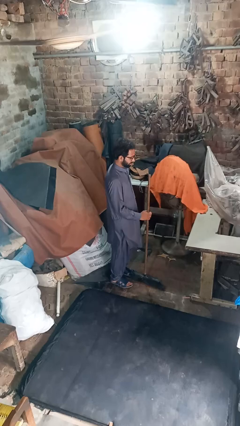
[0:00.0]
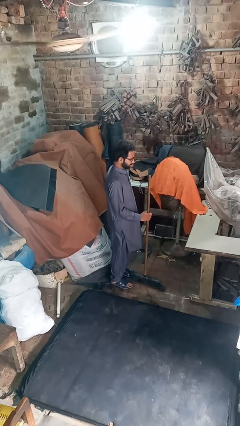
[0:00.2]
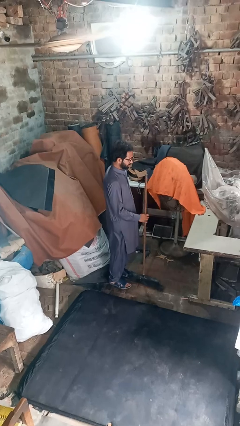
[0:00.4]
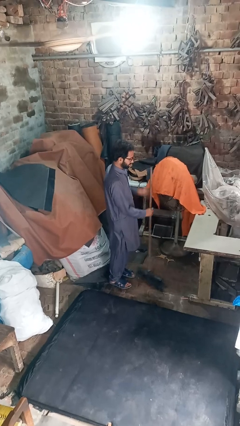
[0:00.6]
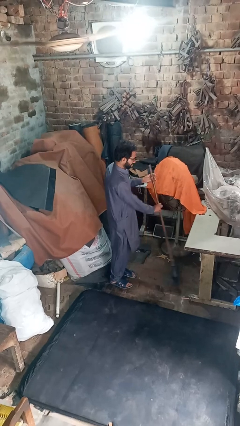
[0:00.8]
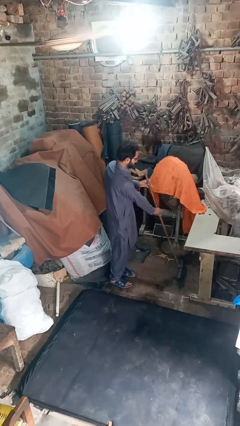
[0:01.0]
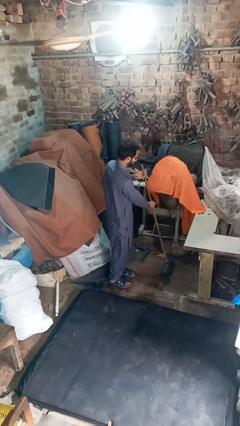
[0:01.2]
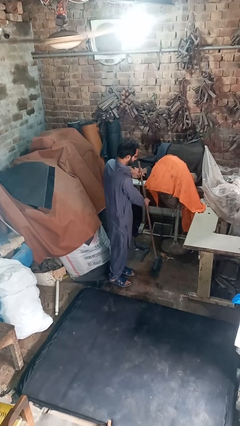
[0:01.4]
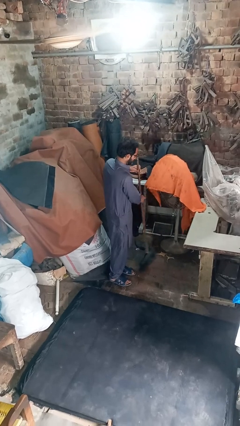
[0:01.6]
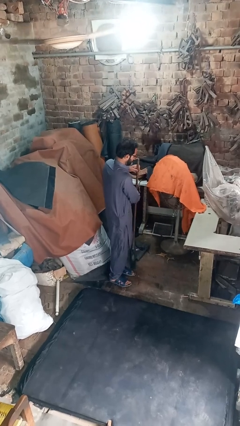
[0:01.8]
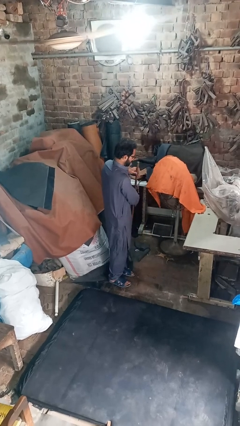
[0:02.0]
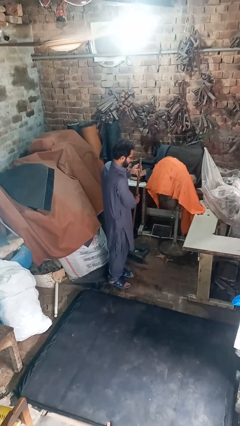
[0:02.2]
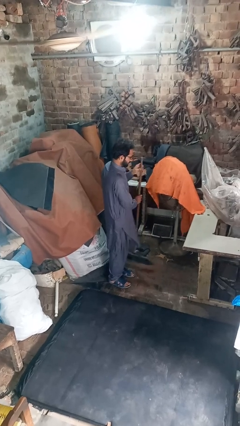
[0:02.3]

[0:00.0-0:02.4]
person sweeps floor

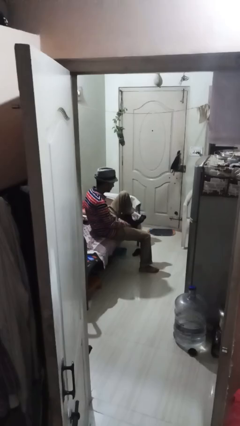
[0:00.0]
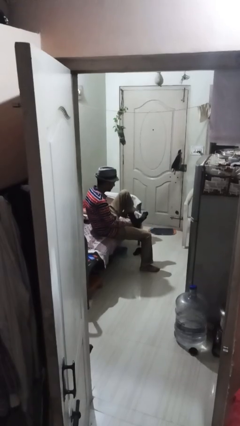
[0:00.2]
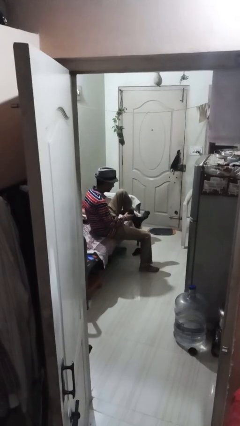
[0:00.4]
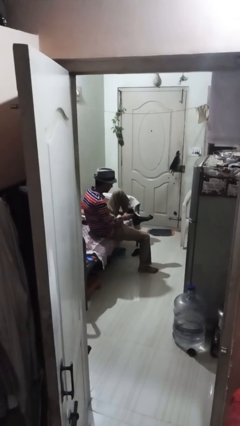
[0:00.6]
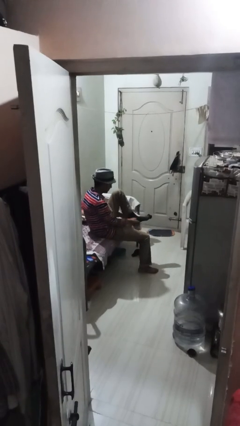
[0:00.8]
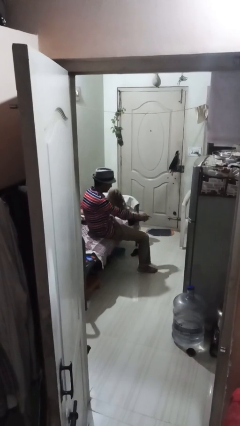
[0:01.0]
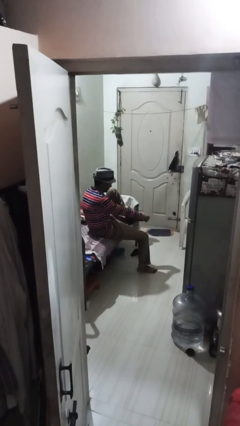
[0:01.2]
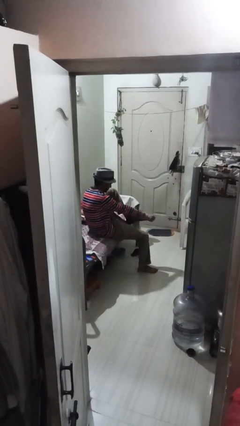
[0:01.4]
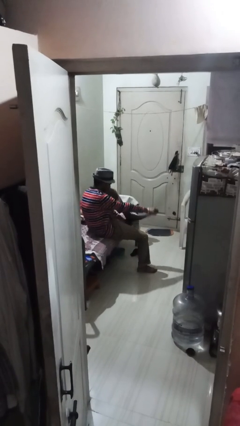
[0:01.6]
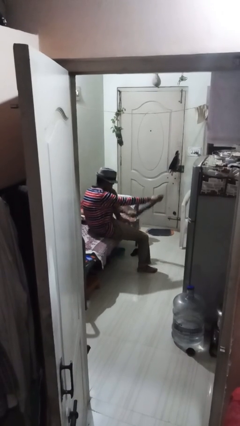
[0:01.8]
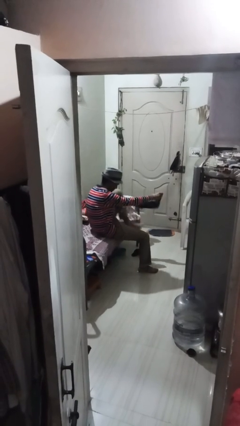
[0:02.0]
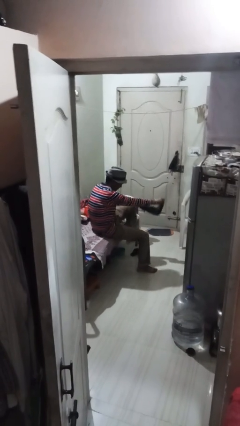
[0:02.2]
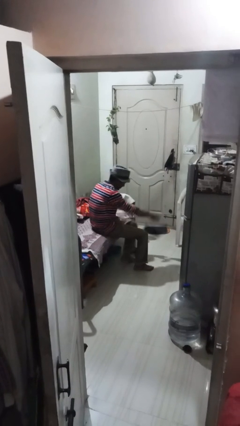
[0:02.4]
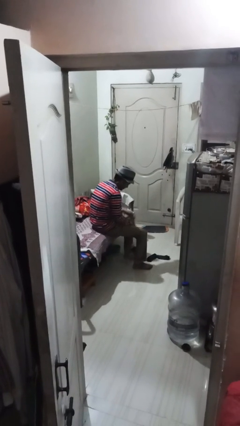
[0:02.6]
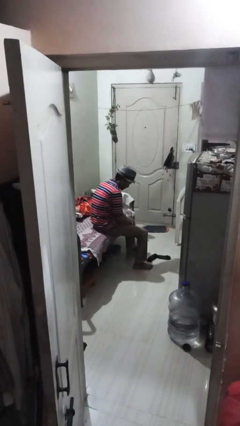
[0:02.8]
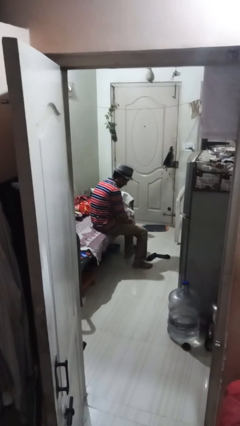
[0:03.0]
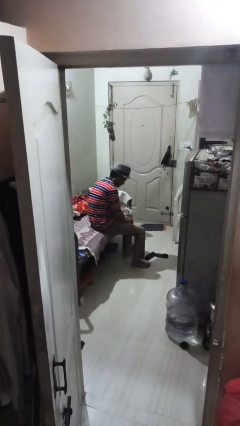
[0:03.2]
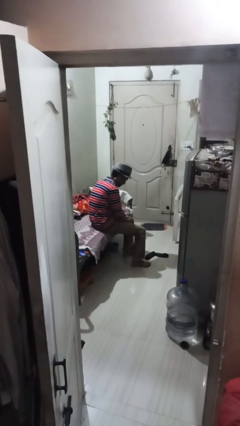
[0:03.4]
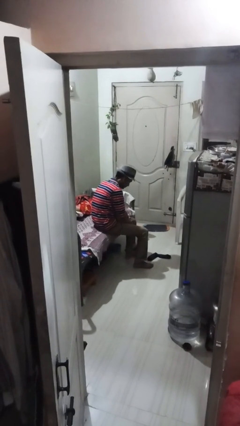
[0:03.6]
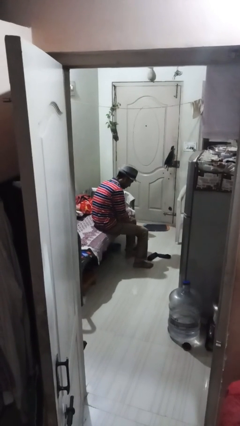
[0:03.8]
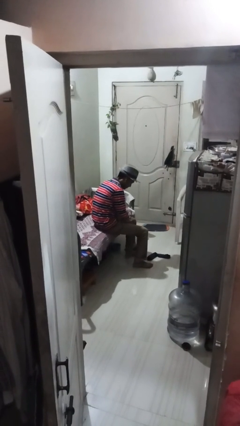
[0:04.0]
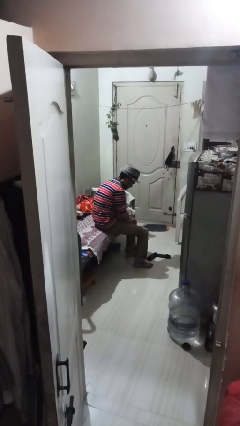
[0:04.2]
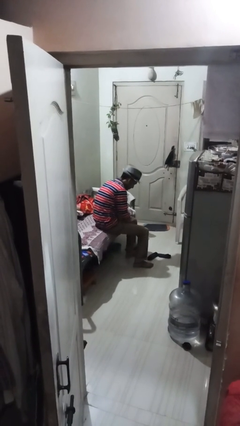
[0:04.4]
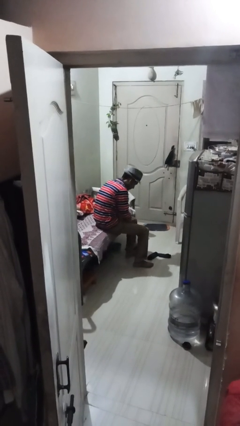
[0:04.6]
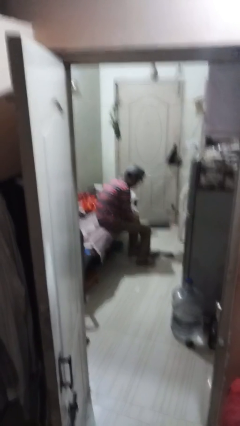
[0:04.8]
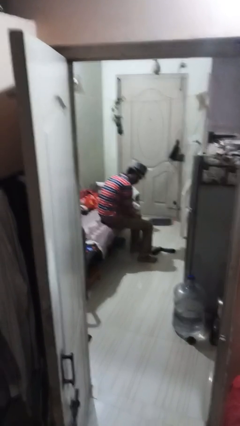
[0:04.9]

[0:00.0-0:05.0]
person takes off socks

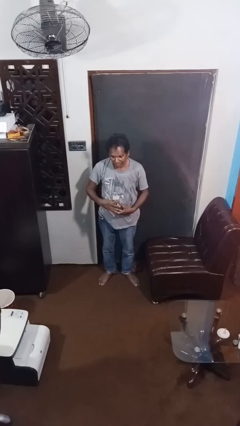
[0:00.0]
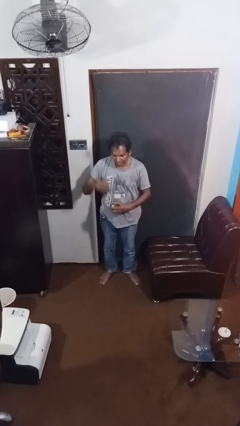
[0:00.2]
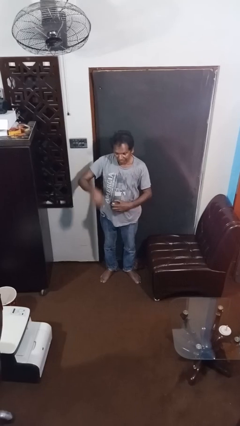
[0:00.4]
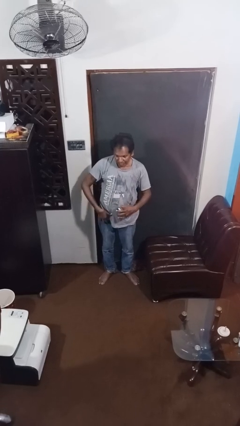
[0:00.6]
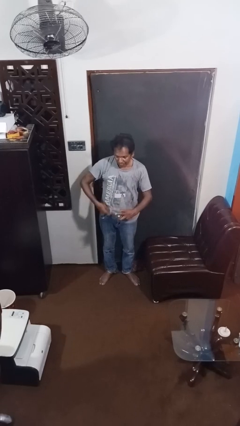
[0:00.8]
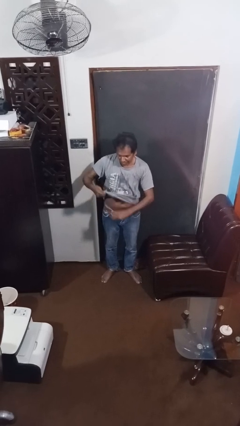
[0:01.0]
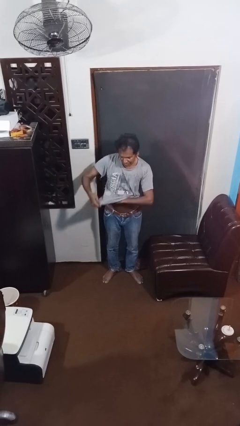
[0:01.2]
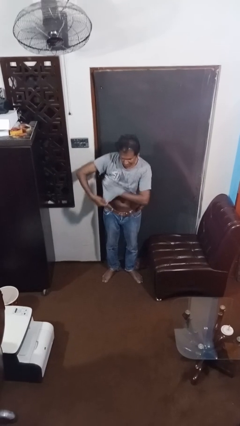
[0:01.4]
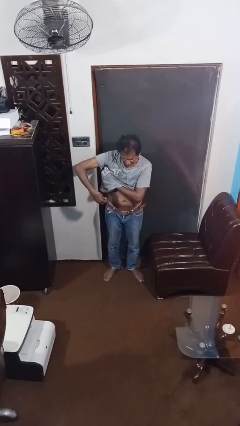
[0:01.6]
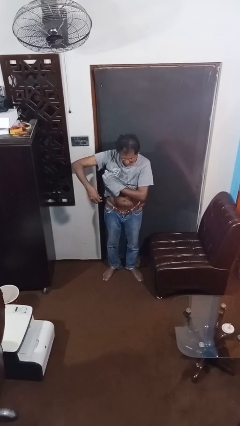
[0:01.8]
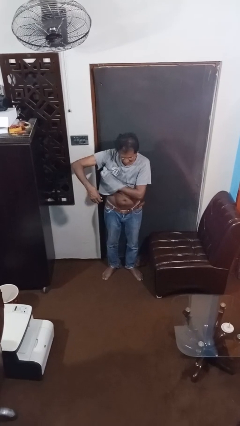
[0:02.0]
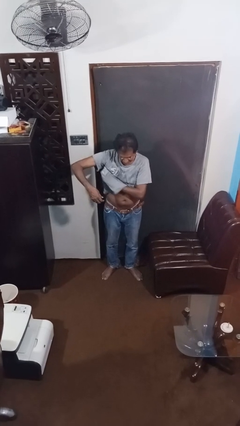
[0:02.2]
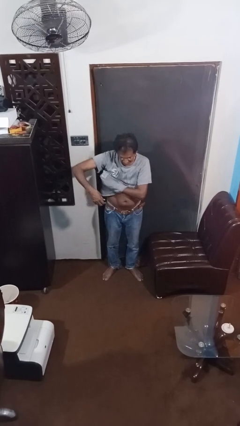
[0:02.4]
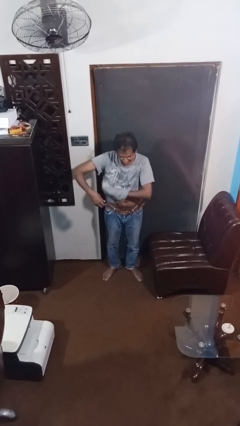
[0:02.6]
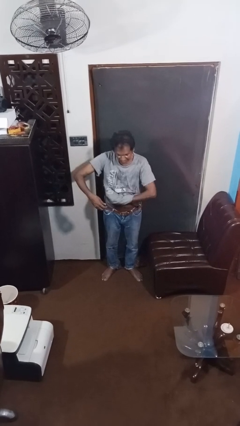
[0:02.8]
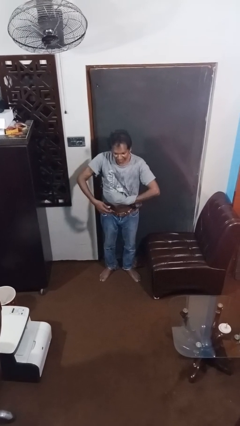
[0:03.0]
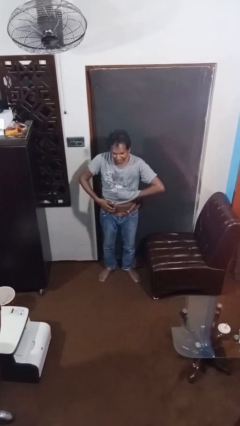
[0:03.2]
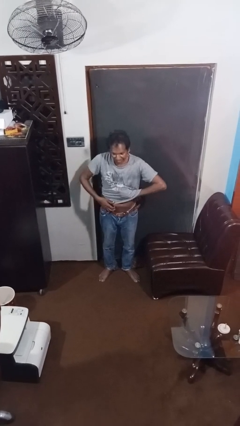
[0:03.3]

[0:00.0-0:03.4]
person applies deodorant

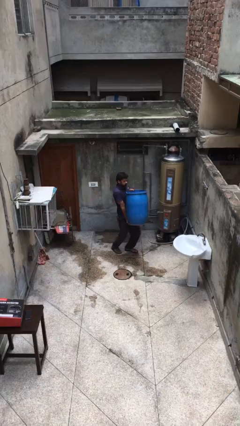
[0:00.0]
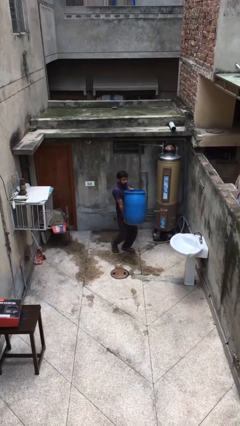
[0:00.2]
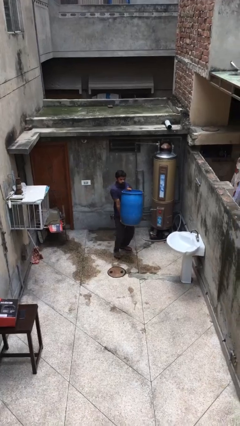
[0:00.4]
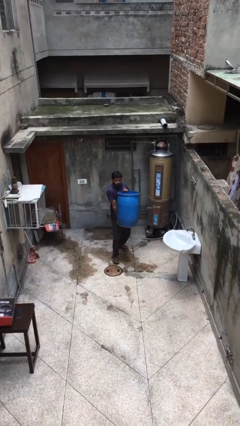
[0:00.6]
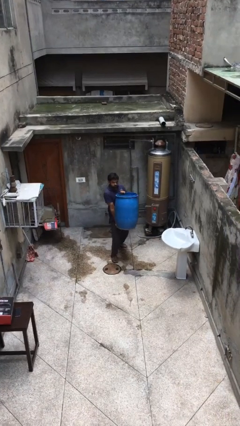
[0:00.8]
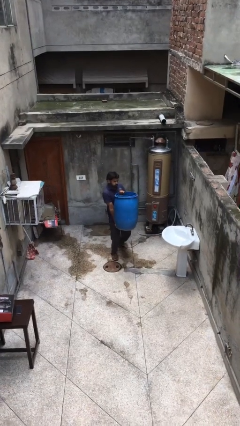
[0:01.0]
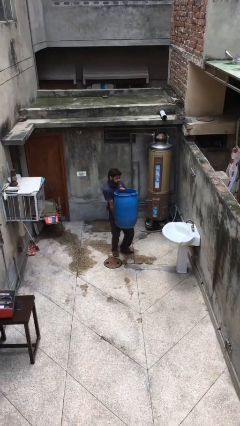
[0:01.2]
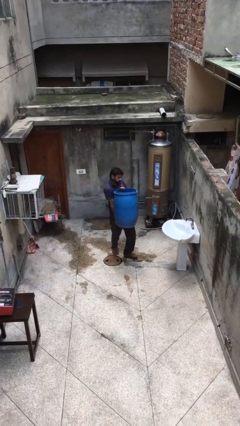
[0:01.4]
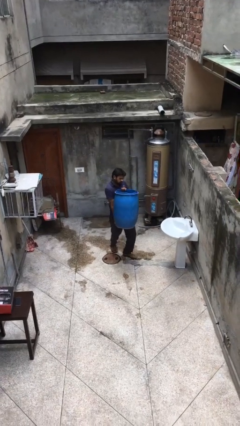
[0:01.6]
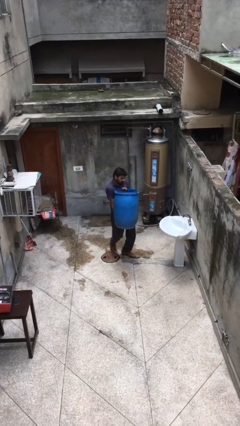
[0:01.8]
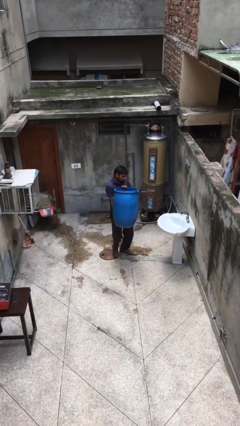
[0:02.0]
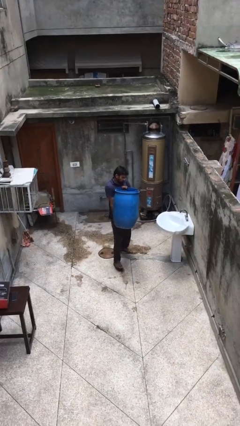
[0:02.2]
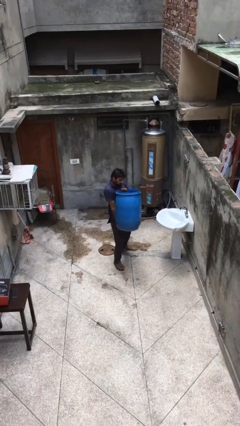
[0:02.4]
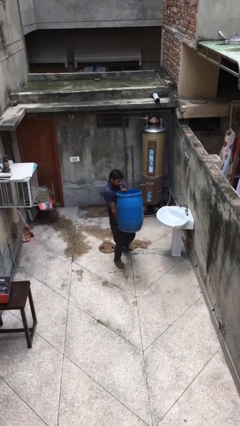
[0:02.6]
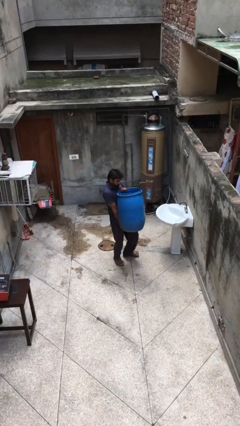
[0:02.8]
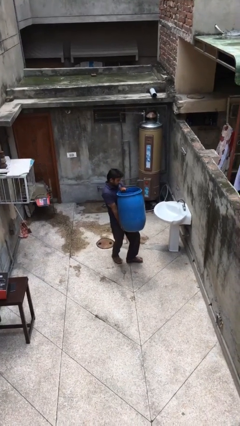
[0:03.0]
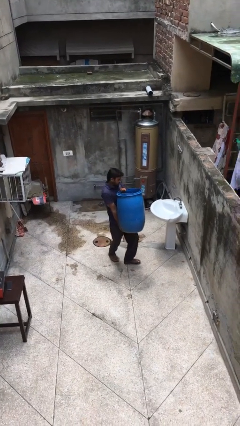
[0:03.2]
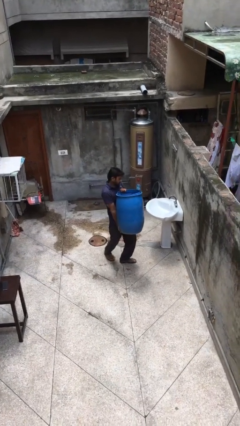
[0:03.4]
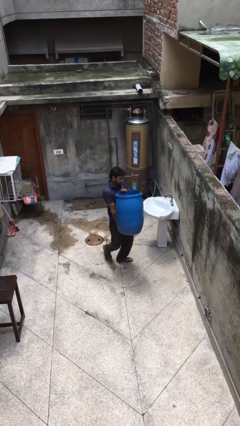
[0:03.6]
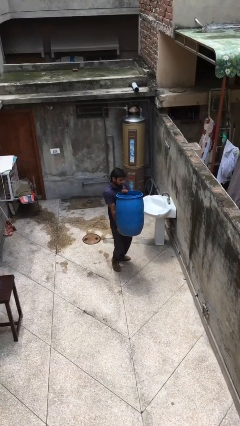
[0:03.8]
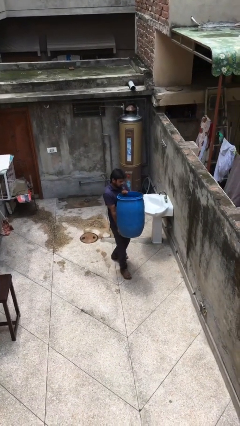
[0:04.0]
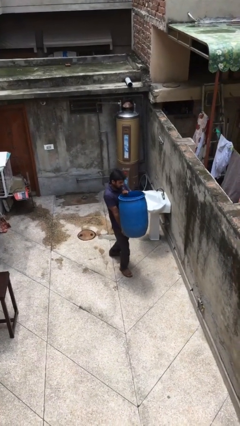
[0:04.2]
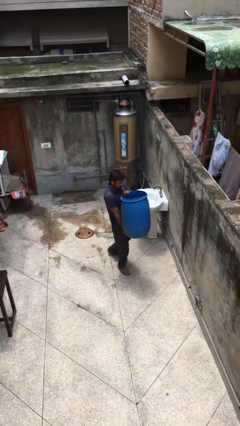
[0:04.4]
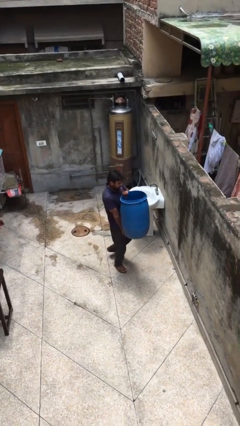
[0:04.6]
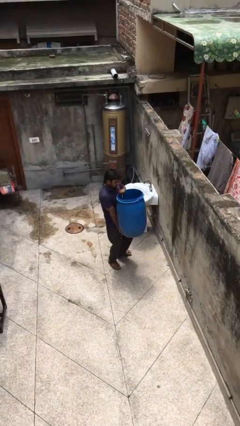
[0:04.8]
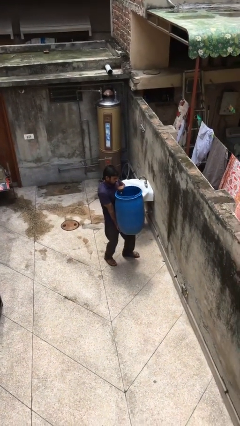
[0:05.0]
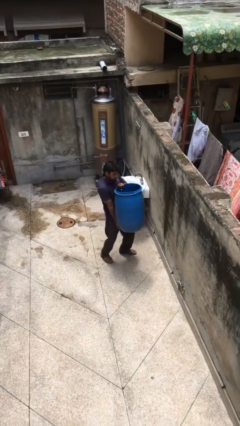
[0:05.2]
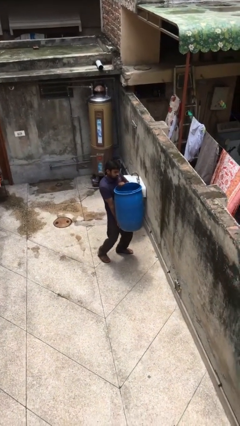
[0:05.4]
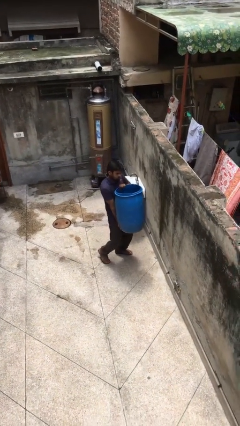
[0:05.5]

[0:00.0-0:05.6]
person carries heavy object

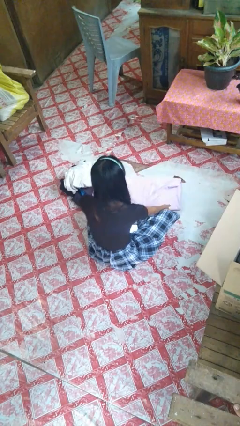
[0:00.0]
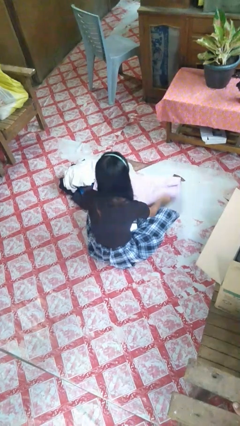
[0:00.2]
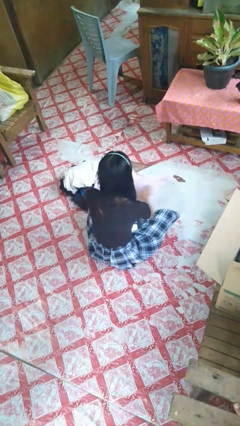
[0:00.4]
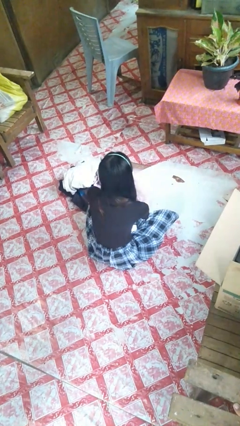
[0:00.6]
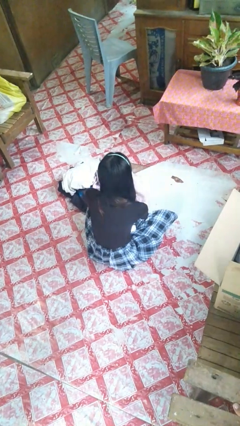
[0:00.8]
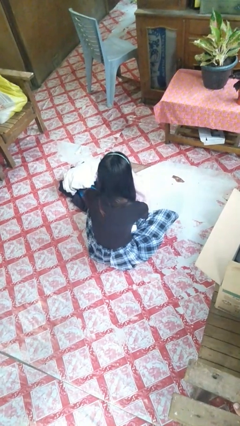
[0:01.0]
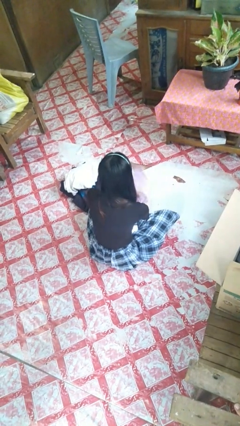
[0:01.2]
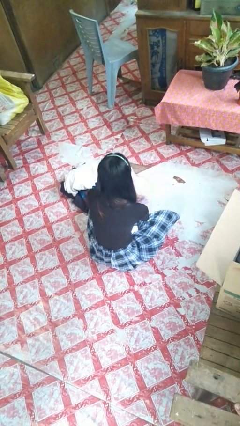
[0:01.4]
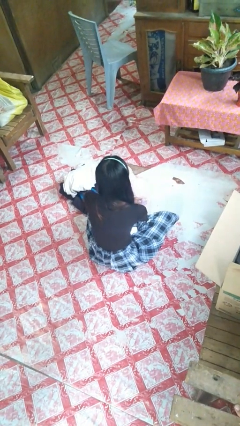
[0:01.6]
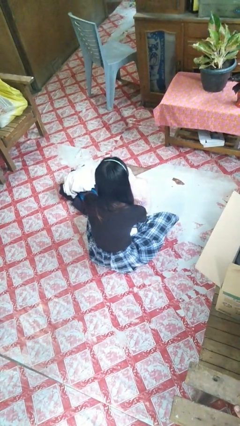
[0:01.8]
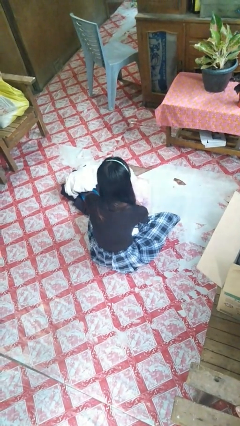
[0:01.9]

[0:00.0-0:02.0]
person folds towel
